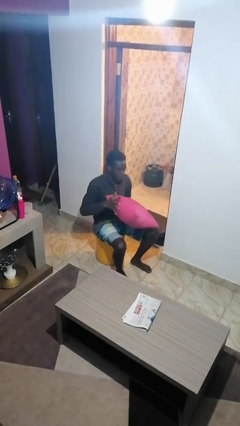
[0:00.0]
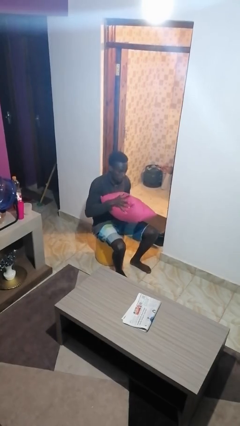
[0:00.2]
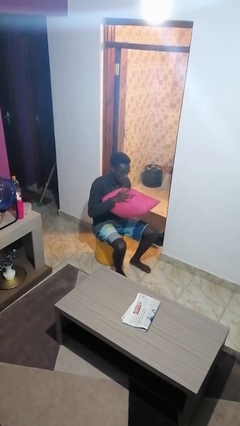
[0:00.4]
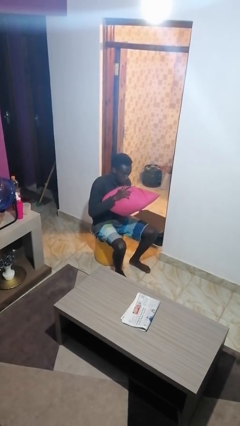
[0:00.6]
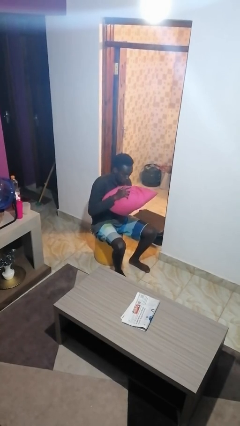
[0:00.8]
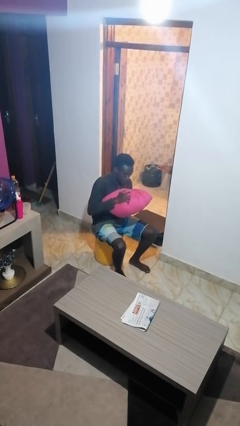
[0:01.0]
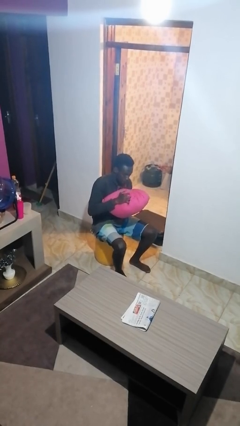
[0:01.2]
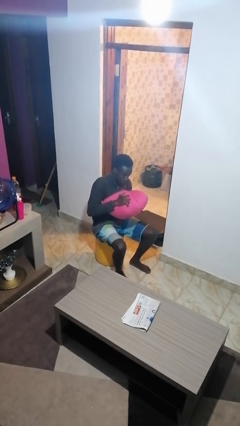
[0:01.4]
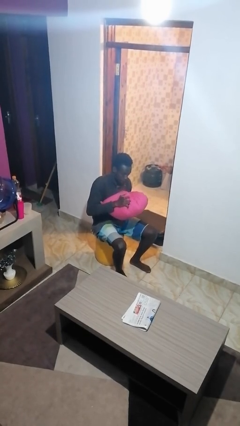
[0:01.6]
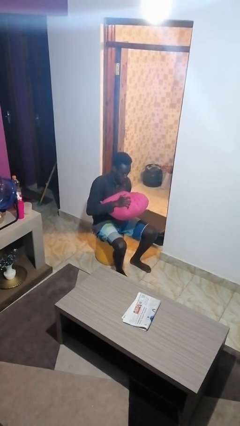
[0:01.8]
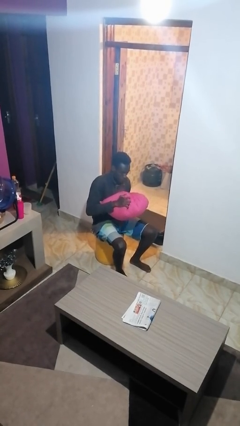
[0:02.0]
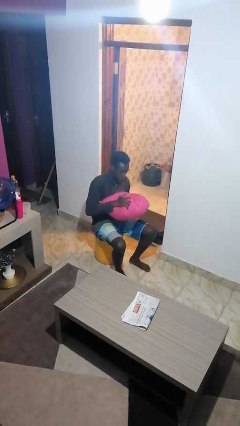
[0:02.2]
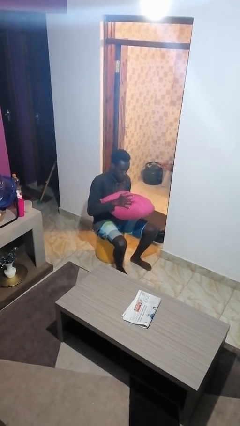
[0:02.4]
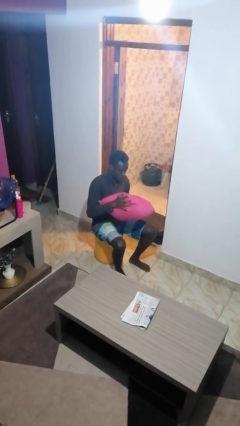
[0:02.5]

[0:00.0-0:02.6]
person squeezes object

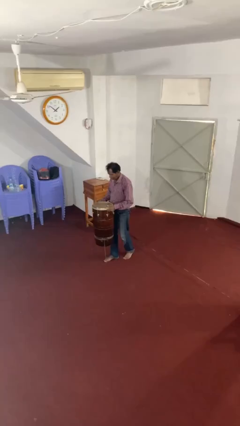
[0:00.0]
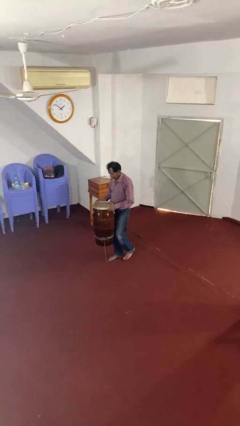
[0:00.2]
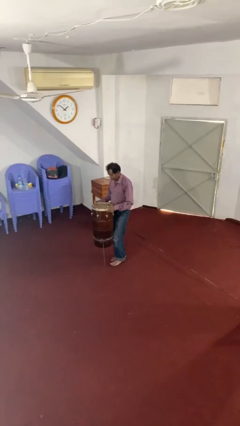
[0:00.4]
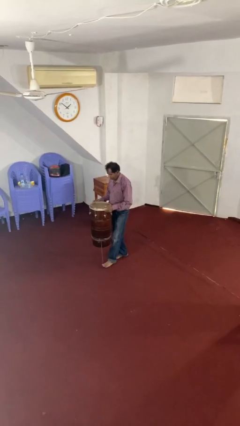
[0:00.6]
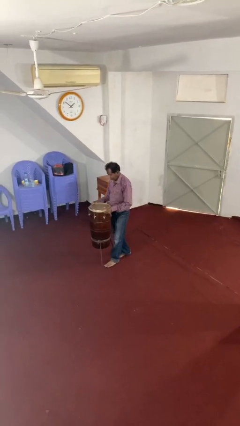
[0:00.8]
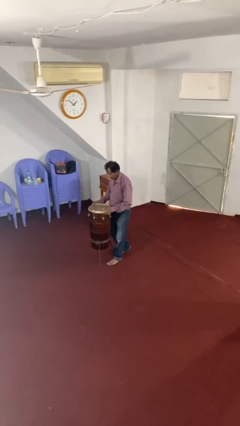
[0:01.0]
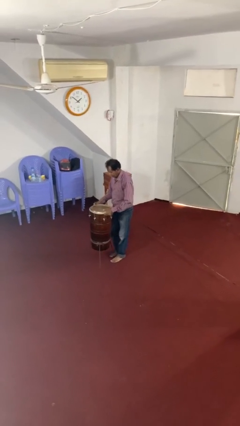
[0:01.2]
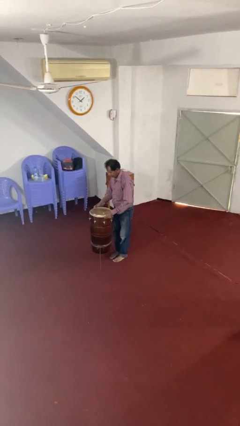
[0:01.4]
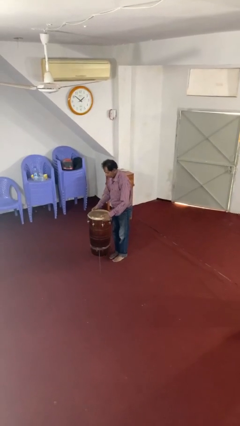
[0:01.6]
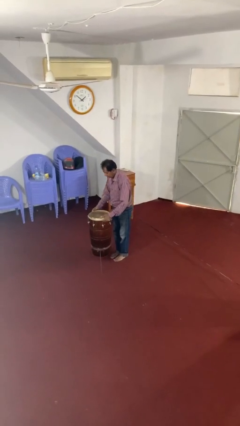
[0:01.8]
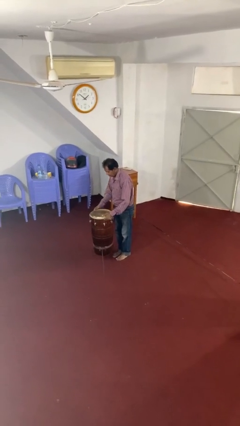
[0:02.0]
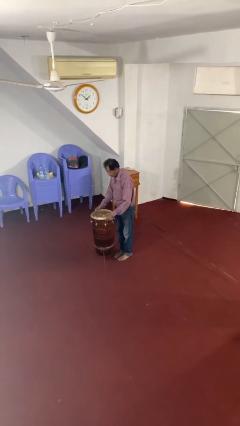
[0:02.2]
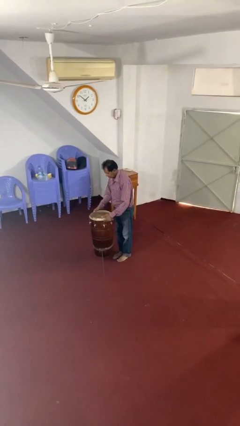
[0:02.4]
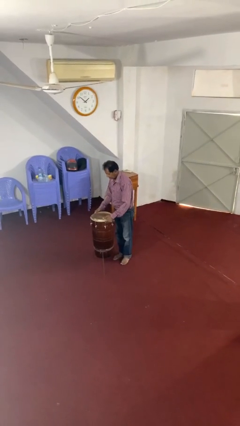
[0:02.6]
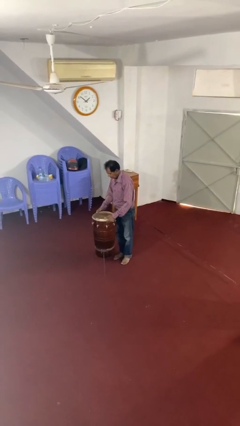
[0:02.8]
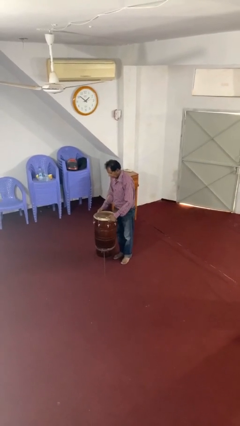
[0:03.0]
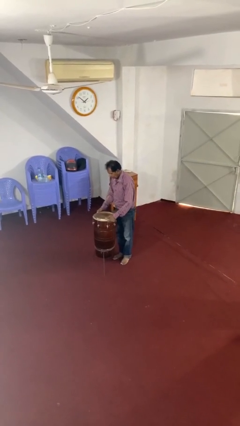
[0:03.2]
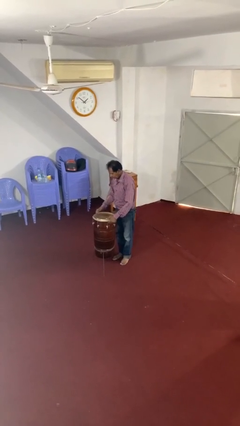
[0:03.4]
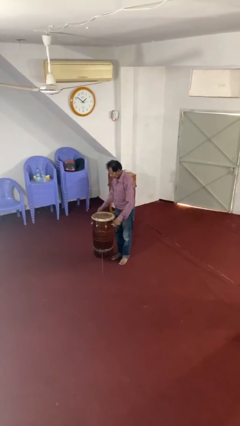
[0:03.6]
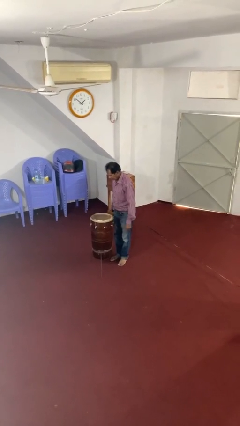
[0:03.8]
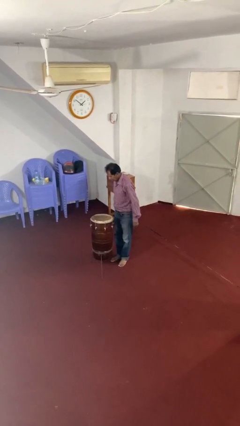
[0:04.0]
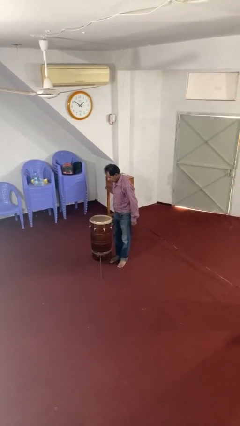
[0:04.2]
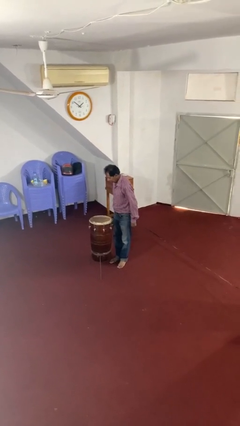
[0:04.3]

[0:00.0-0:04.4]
person puts down object on floor

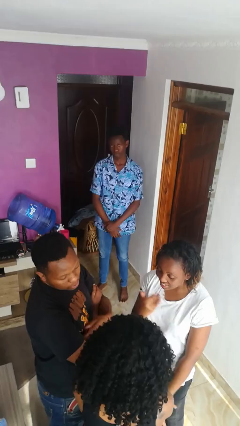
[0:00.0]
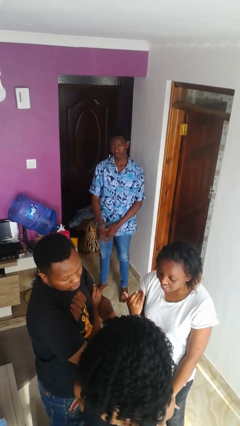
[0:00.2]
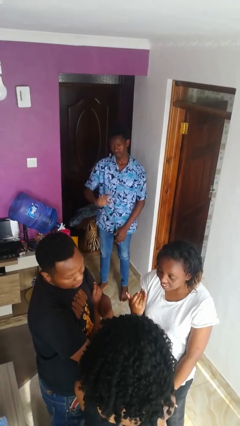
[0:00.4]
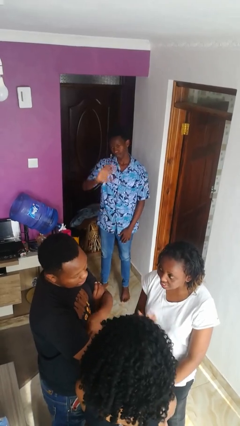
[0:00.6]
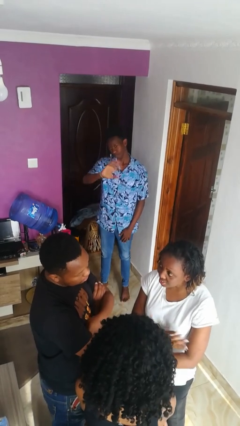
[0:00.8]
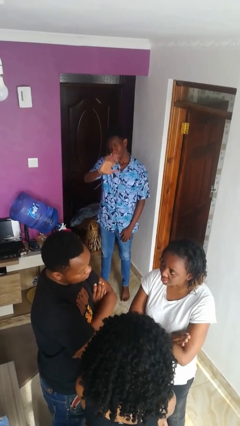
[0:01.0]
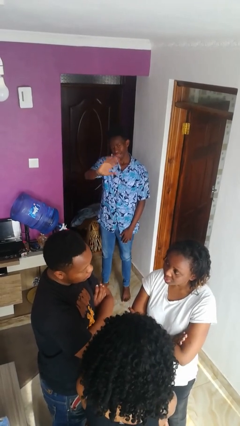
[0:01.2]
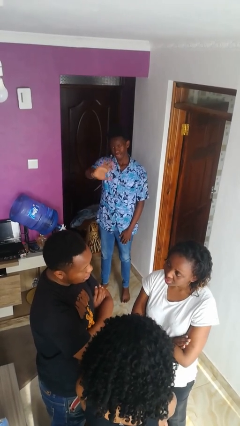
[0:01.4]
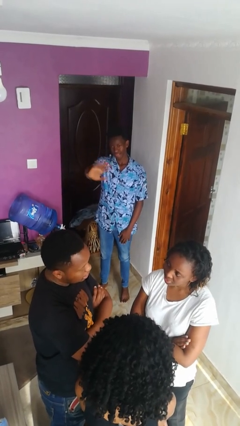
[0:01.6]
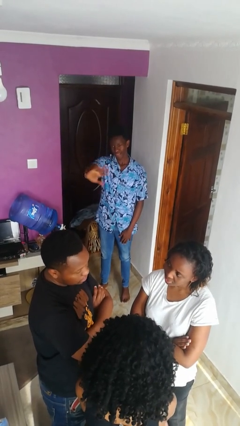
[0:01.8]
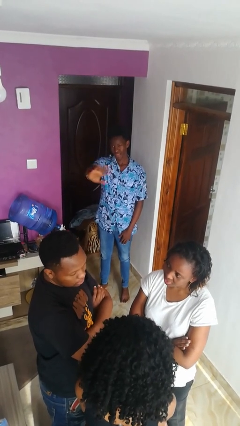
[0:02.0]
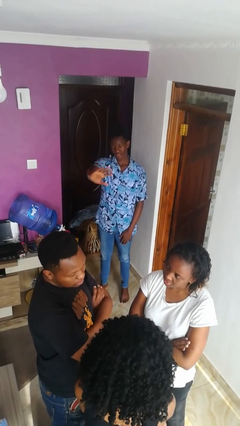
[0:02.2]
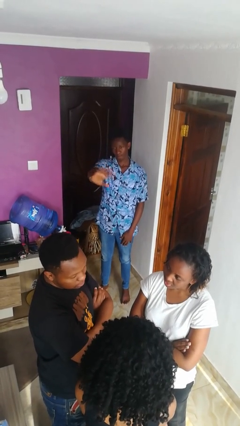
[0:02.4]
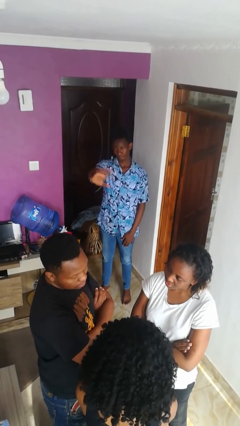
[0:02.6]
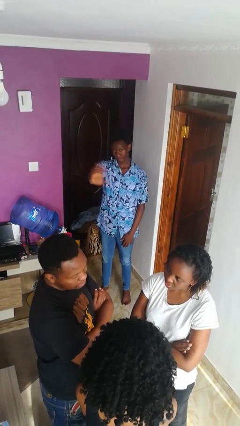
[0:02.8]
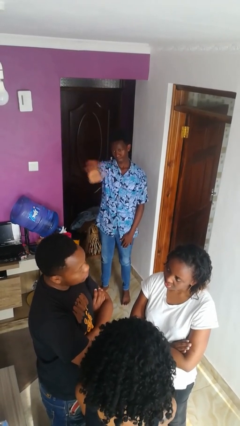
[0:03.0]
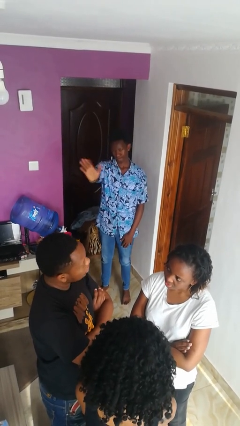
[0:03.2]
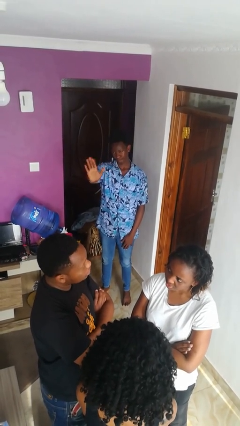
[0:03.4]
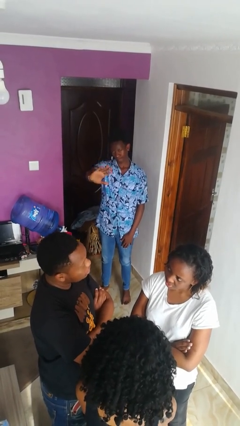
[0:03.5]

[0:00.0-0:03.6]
person waves at person

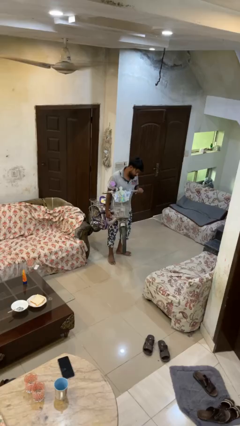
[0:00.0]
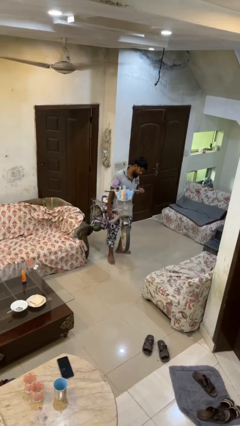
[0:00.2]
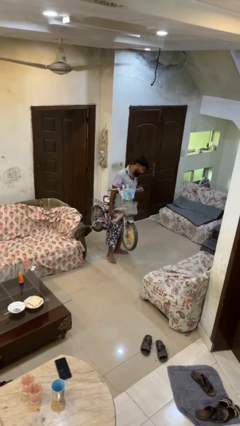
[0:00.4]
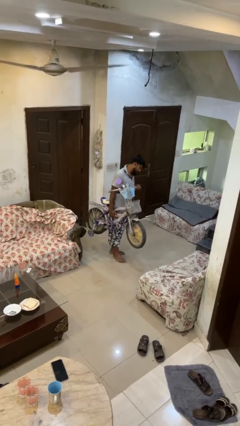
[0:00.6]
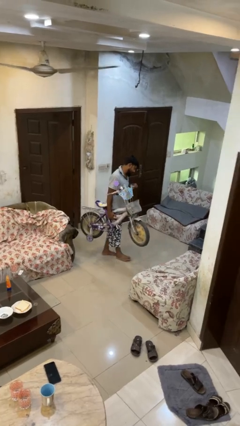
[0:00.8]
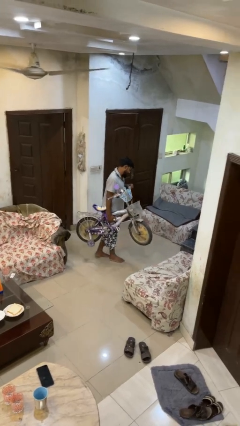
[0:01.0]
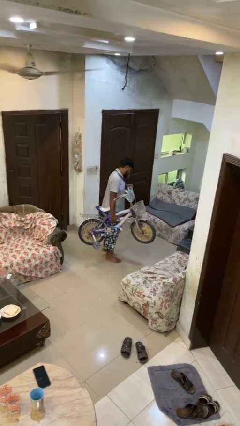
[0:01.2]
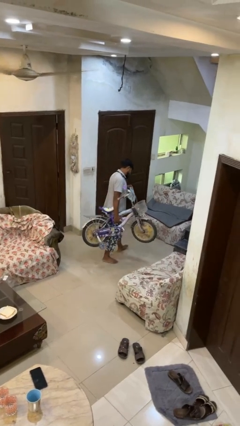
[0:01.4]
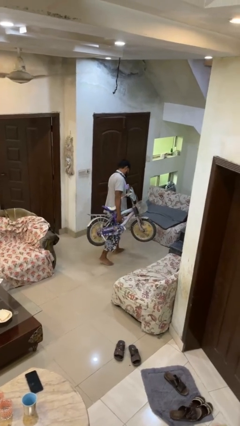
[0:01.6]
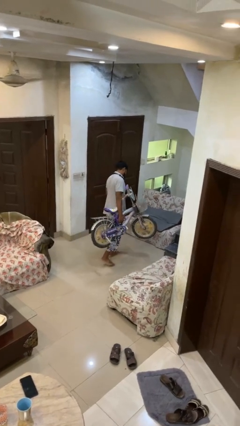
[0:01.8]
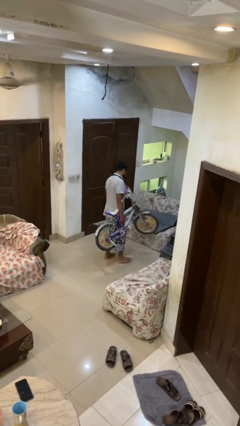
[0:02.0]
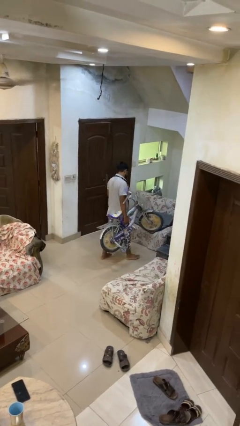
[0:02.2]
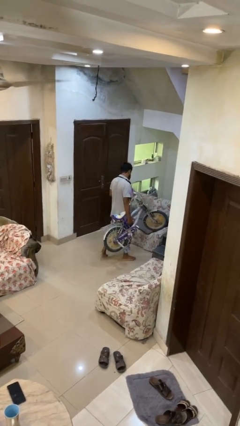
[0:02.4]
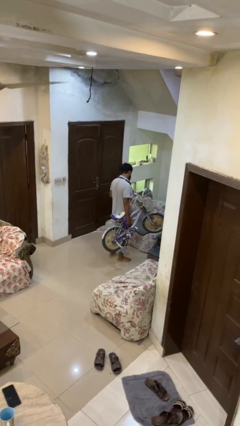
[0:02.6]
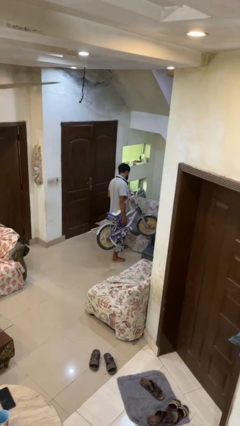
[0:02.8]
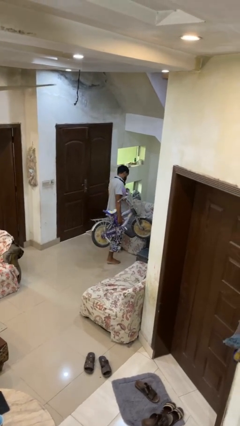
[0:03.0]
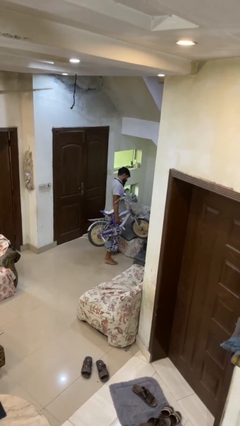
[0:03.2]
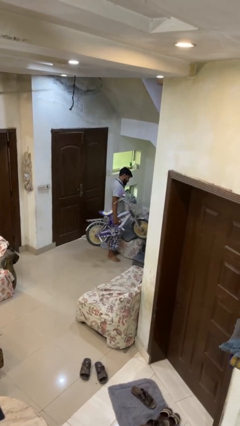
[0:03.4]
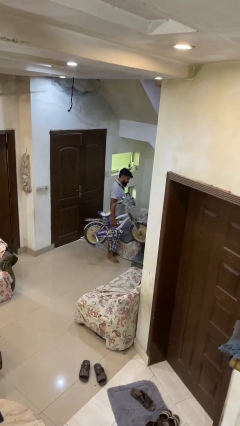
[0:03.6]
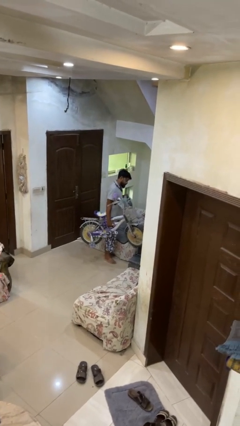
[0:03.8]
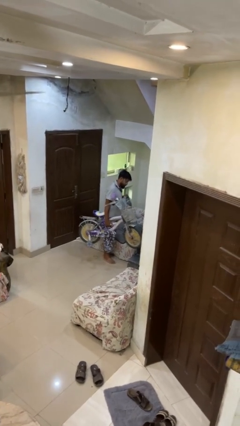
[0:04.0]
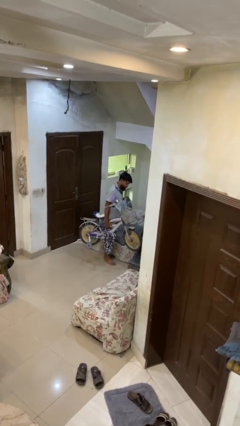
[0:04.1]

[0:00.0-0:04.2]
person carries bicycle

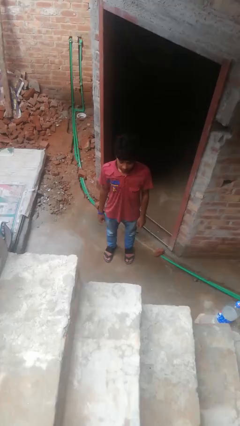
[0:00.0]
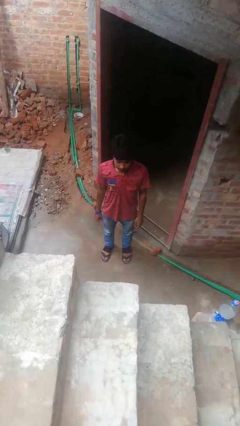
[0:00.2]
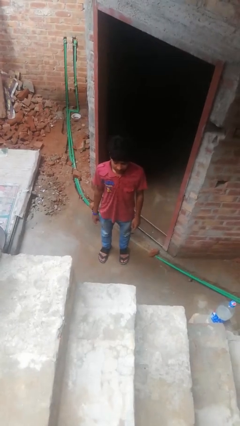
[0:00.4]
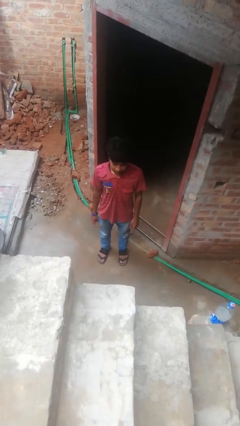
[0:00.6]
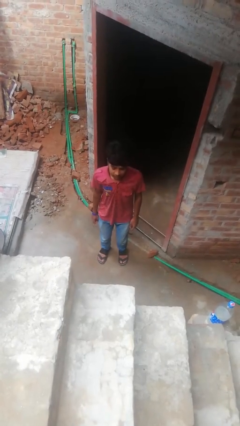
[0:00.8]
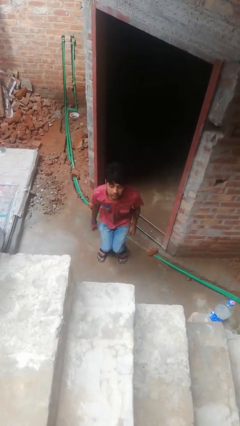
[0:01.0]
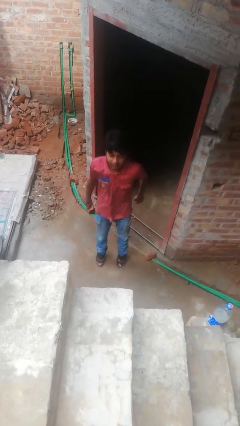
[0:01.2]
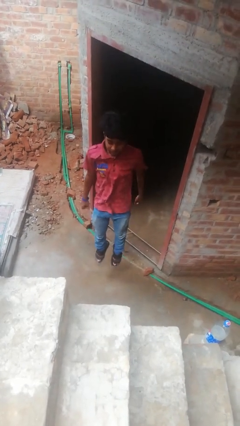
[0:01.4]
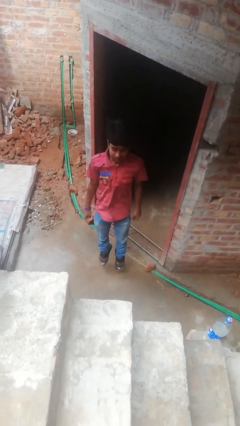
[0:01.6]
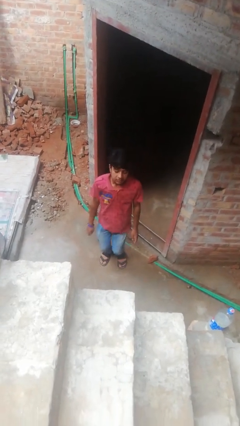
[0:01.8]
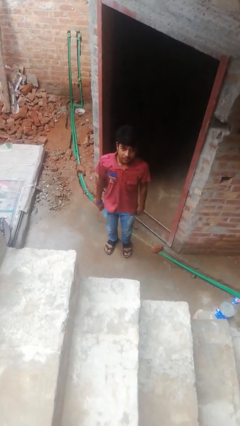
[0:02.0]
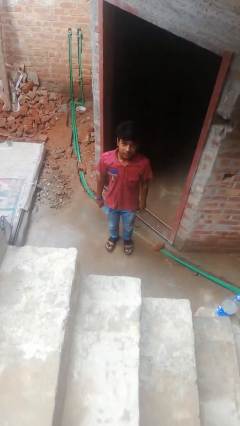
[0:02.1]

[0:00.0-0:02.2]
person jumps

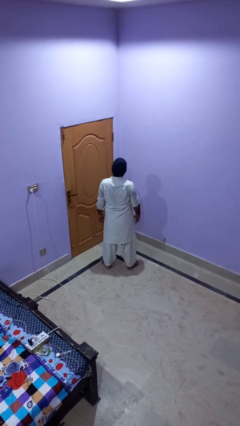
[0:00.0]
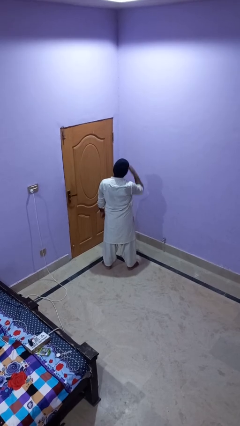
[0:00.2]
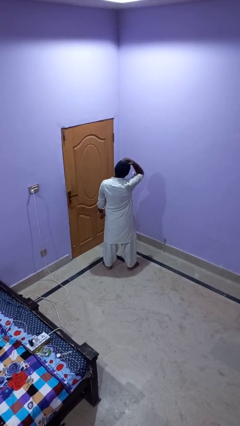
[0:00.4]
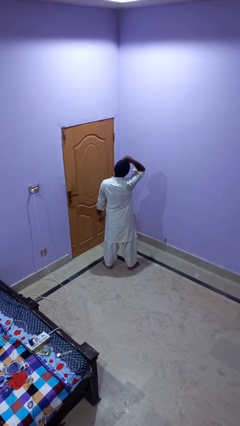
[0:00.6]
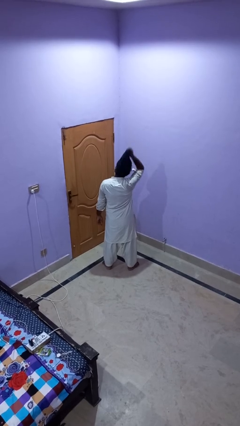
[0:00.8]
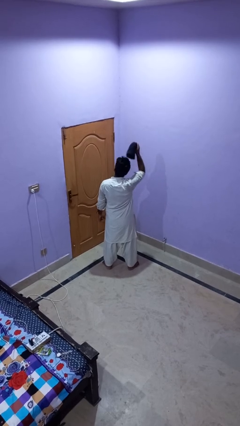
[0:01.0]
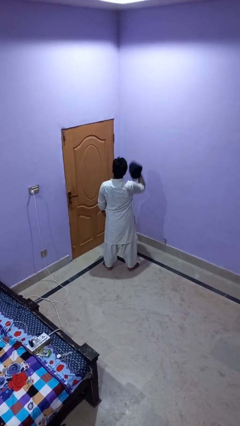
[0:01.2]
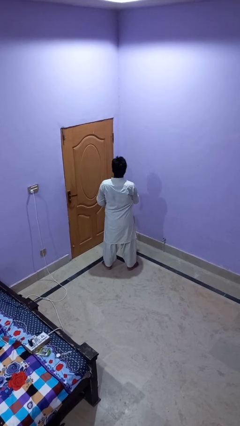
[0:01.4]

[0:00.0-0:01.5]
person takes off hat
